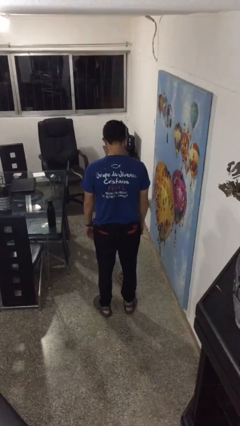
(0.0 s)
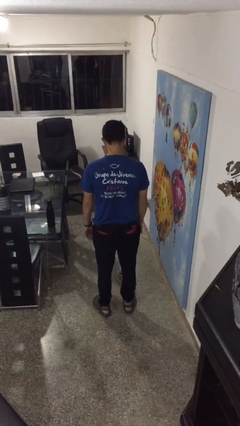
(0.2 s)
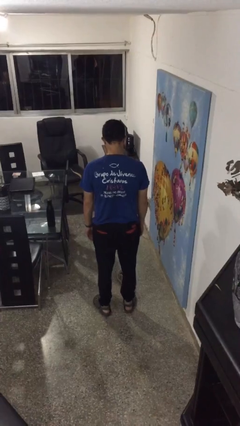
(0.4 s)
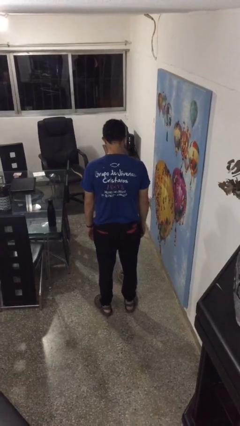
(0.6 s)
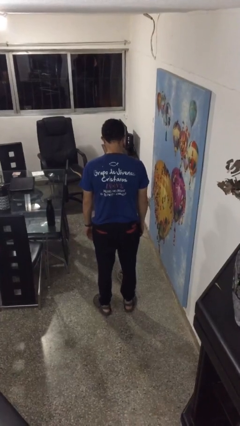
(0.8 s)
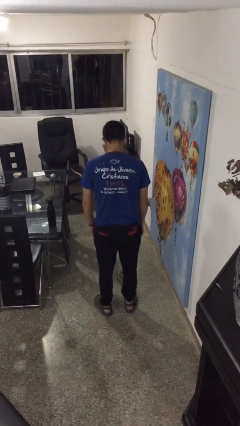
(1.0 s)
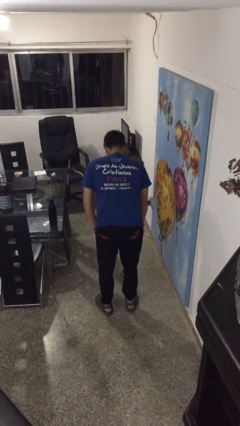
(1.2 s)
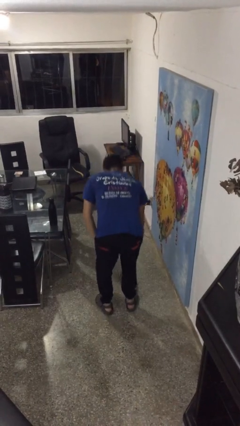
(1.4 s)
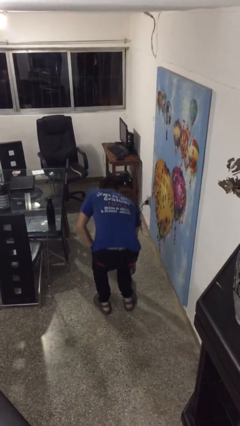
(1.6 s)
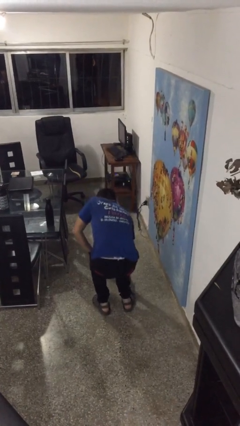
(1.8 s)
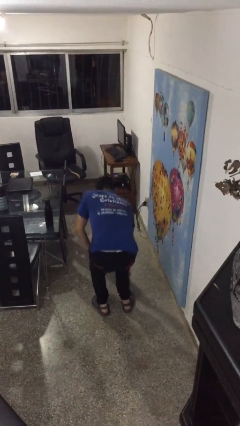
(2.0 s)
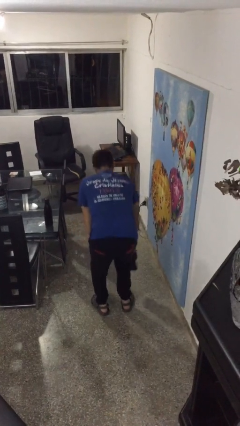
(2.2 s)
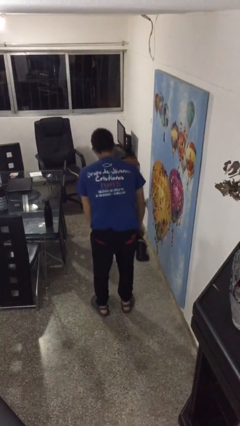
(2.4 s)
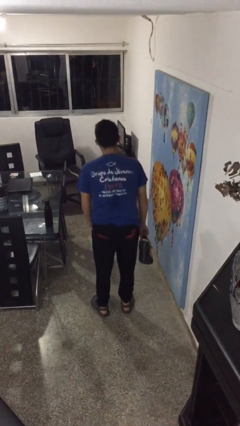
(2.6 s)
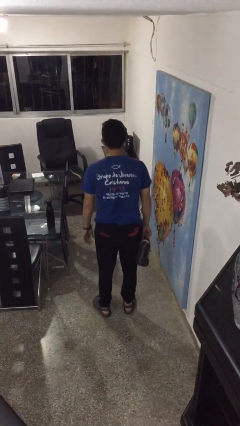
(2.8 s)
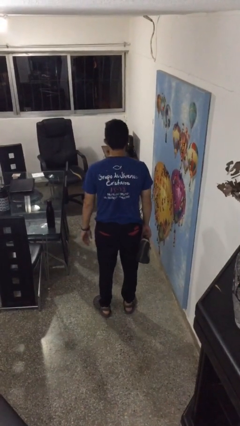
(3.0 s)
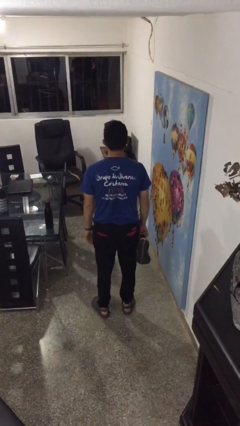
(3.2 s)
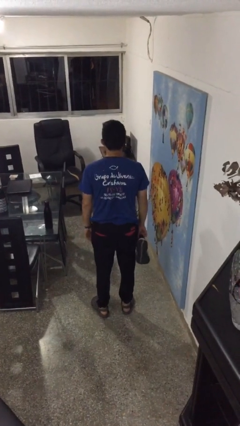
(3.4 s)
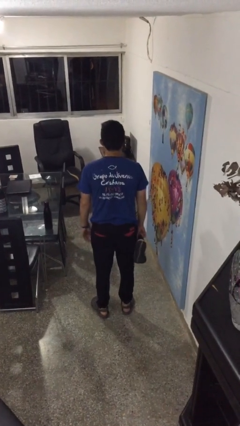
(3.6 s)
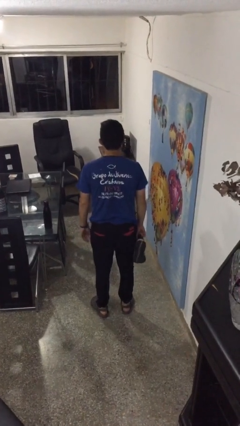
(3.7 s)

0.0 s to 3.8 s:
person picks up object from floor

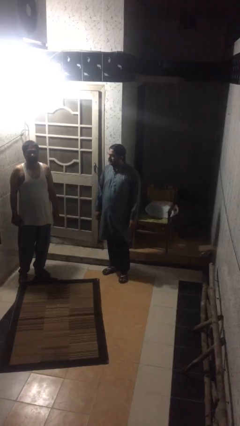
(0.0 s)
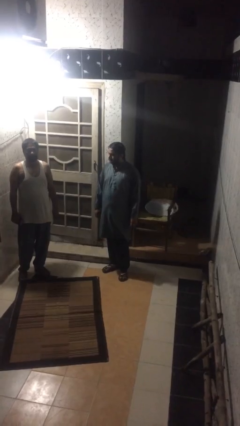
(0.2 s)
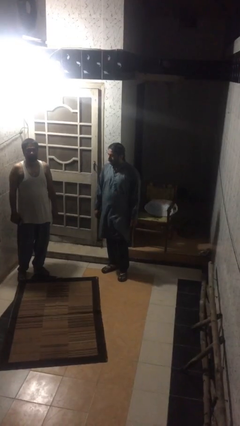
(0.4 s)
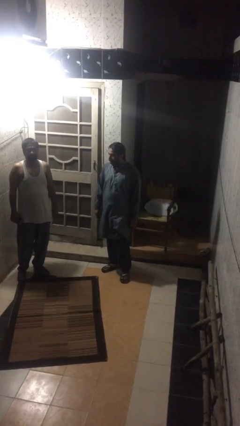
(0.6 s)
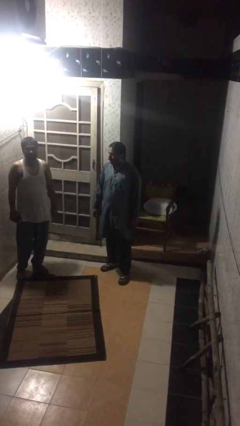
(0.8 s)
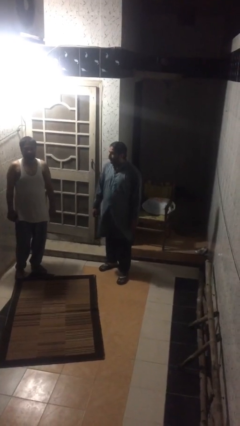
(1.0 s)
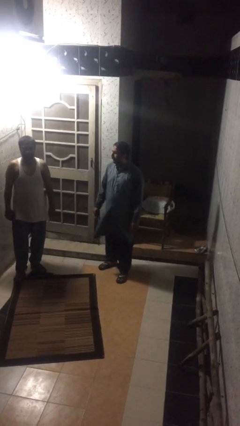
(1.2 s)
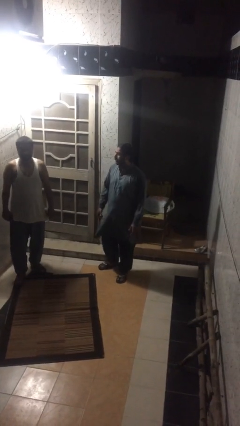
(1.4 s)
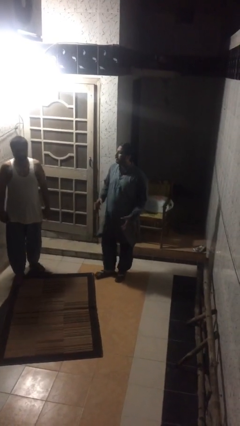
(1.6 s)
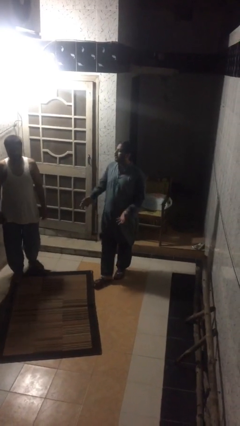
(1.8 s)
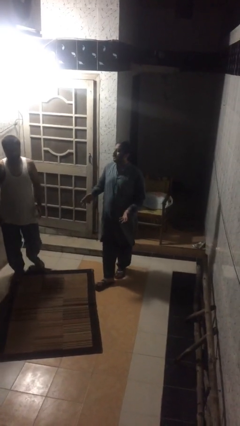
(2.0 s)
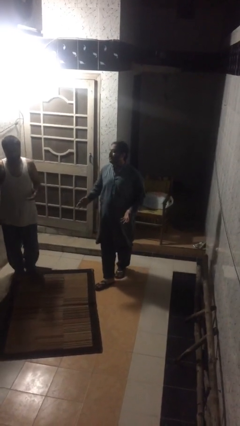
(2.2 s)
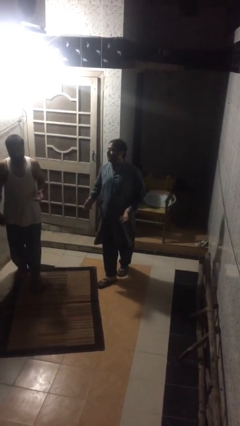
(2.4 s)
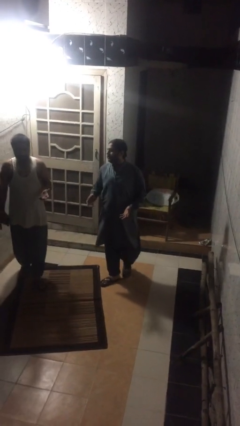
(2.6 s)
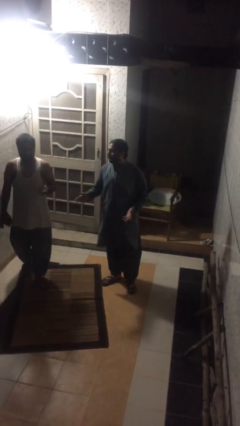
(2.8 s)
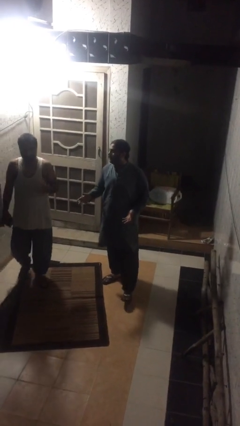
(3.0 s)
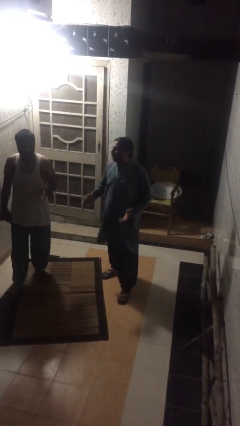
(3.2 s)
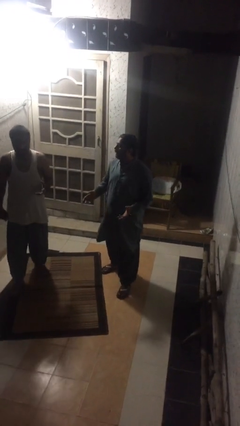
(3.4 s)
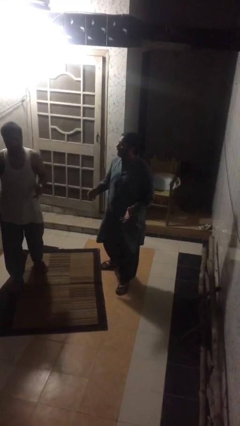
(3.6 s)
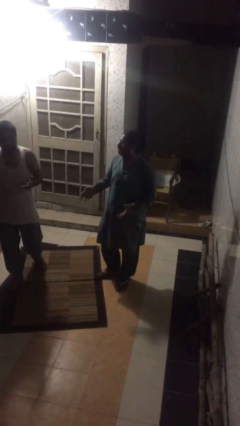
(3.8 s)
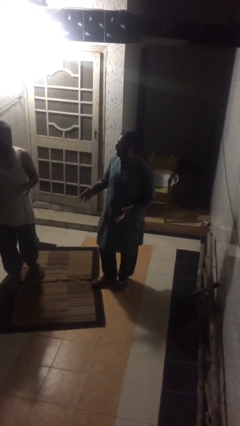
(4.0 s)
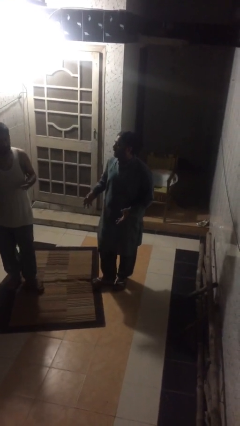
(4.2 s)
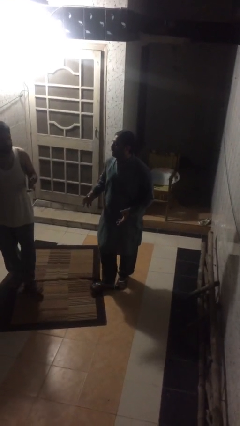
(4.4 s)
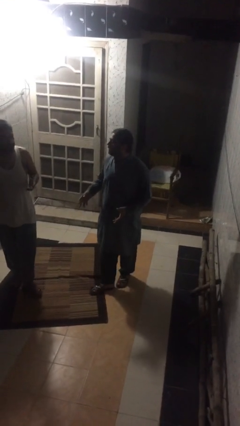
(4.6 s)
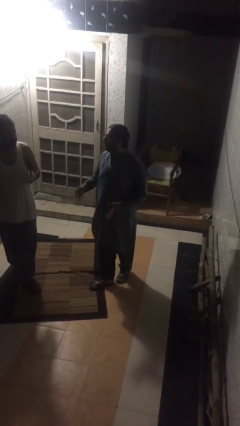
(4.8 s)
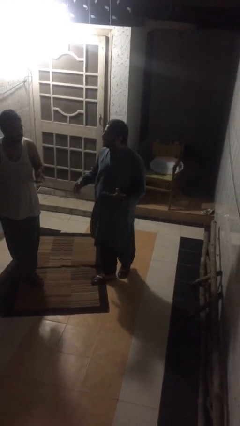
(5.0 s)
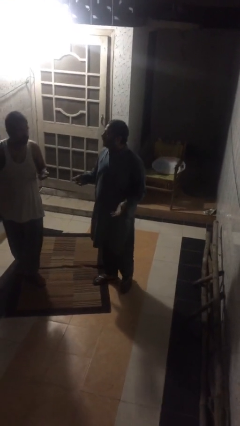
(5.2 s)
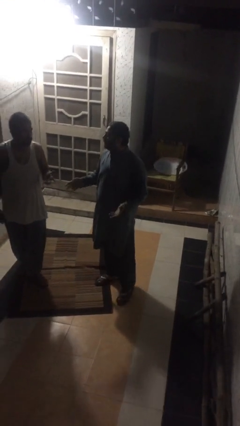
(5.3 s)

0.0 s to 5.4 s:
person talks to person

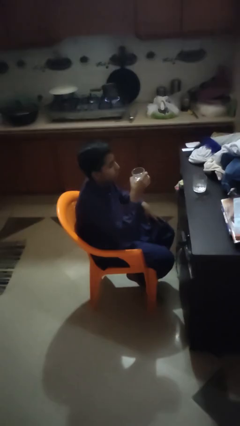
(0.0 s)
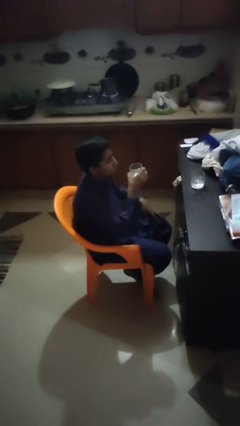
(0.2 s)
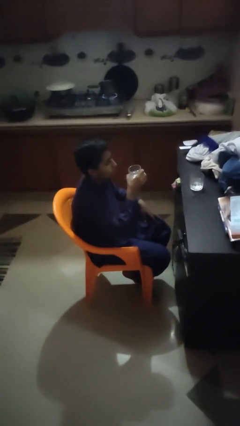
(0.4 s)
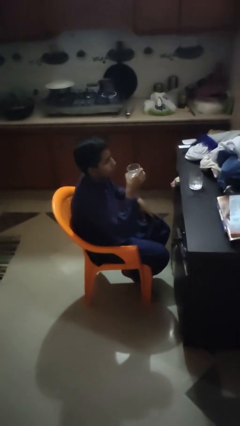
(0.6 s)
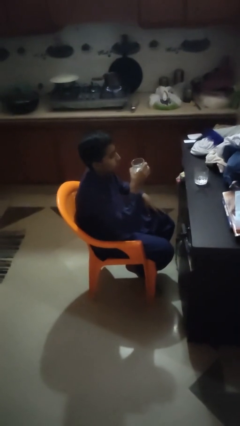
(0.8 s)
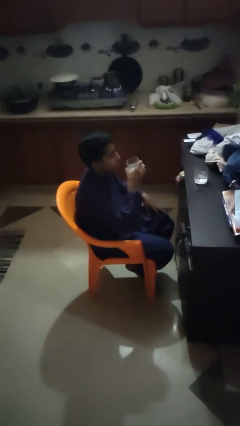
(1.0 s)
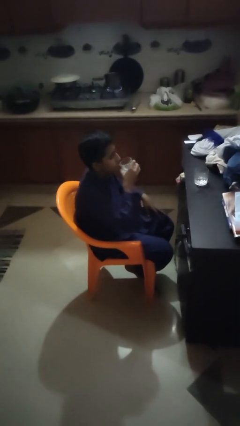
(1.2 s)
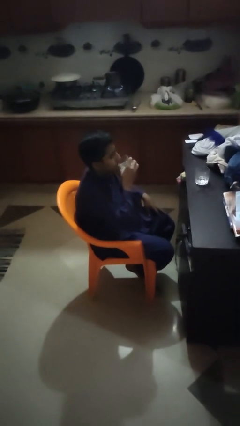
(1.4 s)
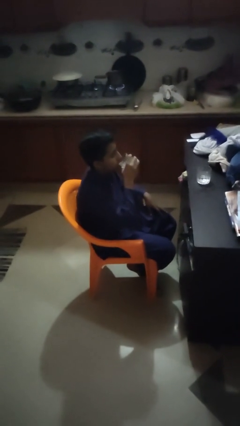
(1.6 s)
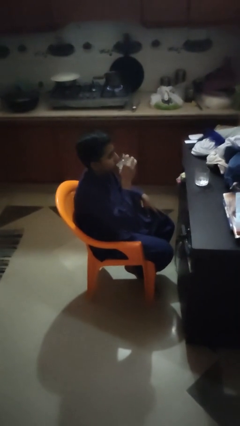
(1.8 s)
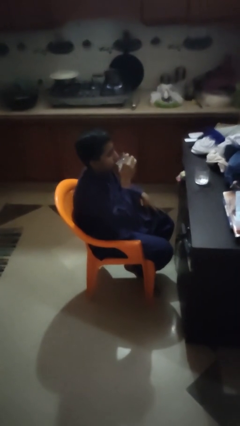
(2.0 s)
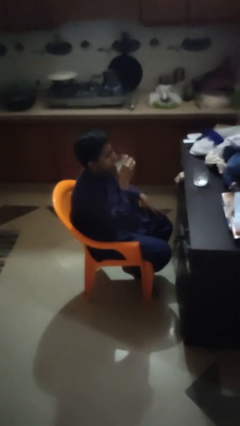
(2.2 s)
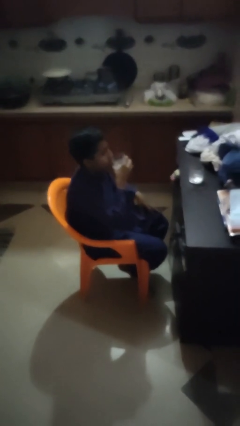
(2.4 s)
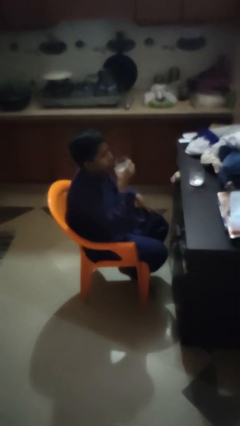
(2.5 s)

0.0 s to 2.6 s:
person drinks from shotglass

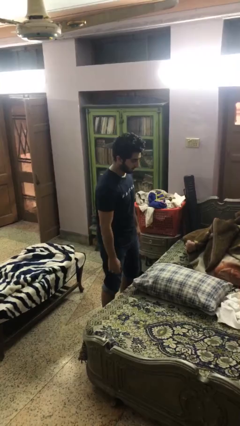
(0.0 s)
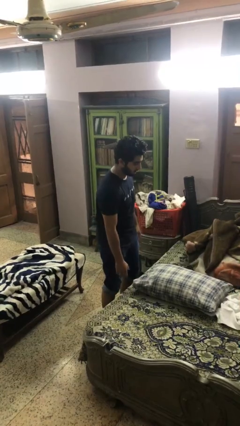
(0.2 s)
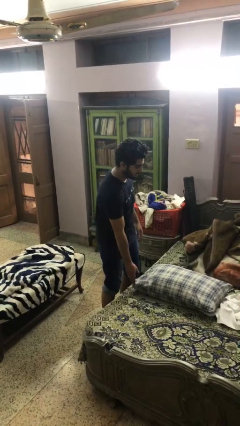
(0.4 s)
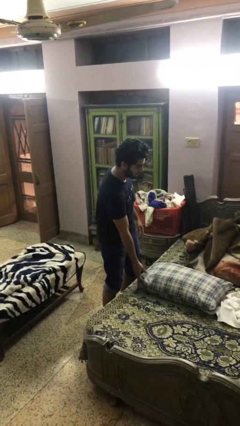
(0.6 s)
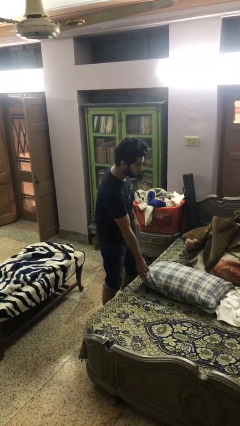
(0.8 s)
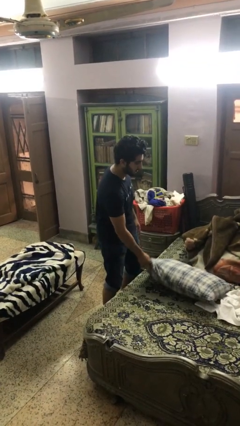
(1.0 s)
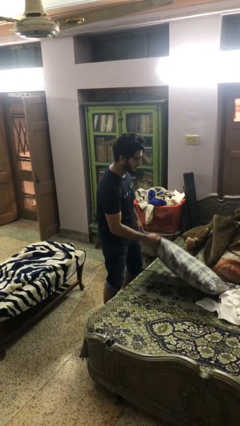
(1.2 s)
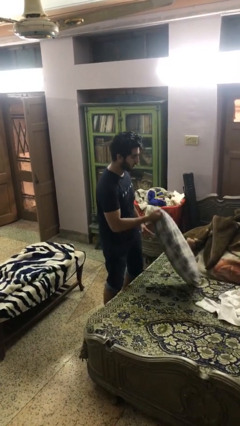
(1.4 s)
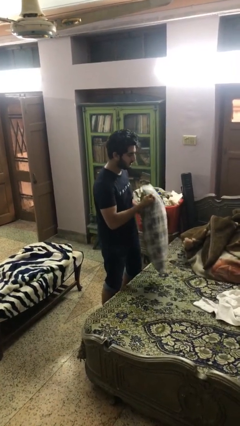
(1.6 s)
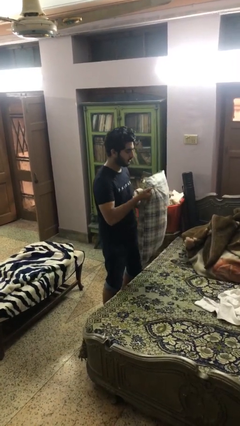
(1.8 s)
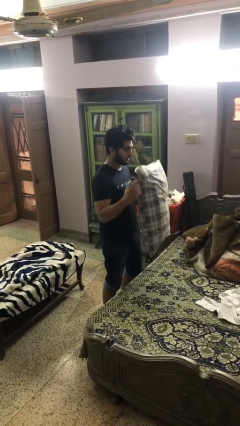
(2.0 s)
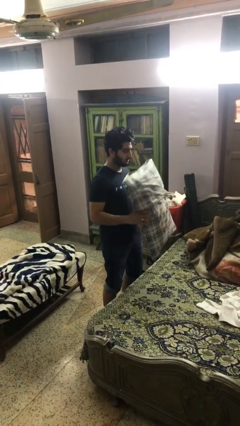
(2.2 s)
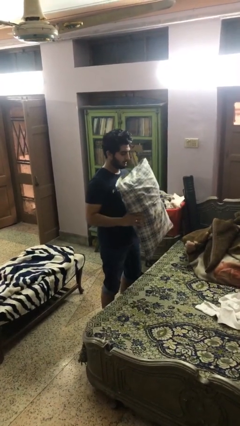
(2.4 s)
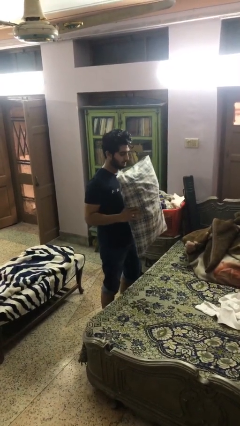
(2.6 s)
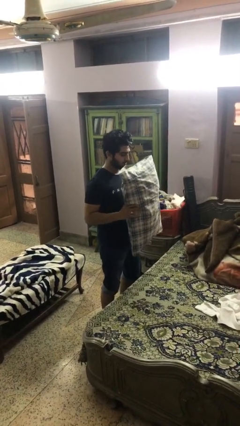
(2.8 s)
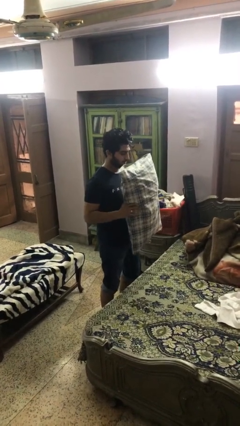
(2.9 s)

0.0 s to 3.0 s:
person picks up object from bed

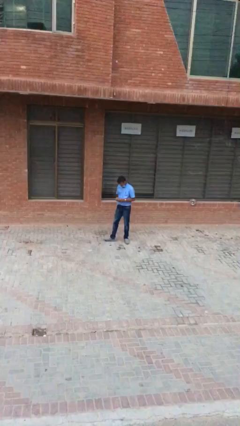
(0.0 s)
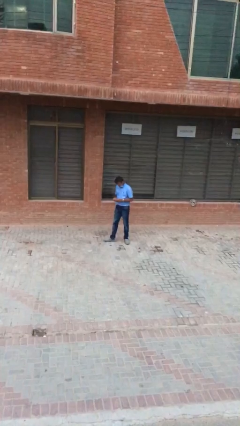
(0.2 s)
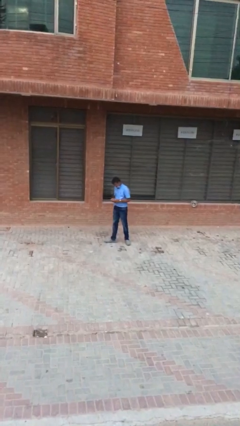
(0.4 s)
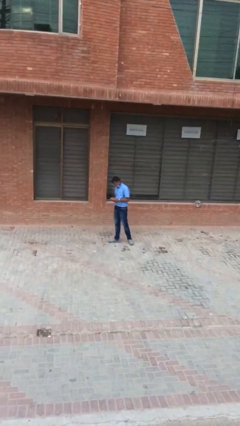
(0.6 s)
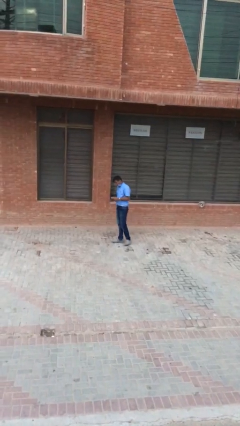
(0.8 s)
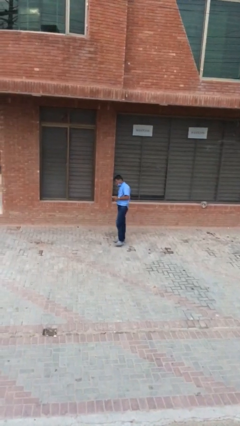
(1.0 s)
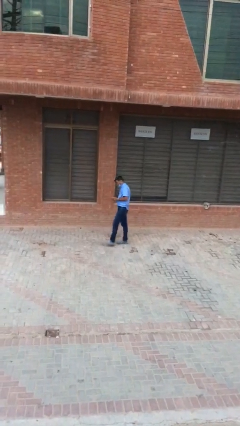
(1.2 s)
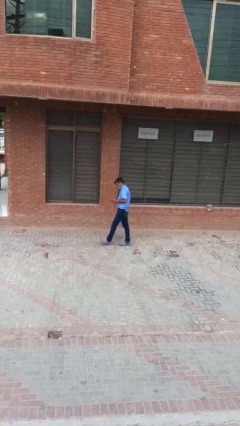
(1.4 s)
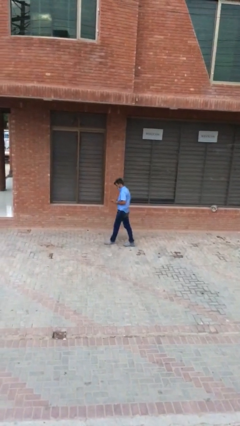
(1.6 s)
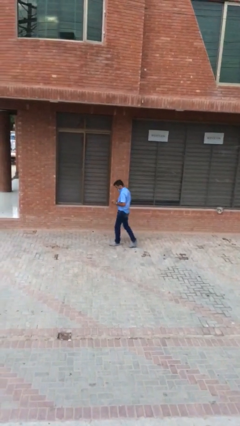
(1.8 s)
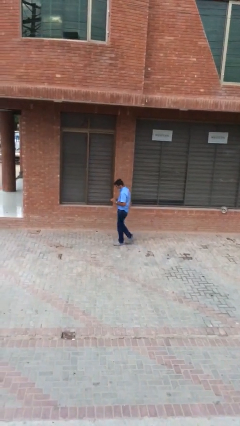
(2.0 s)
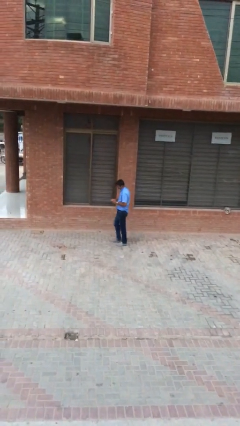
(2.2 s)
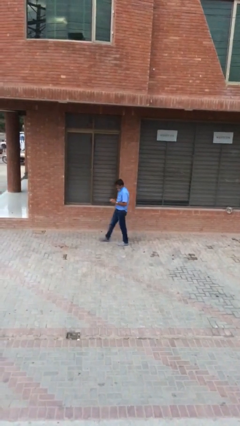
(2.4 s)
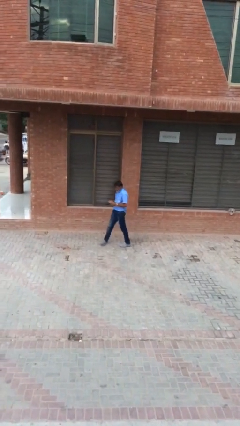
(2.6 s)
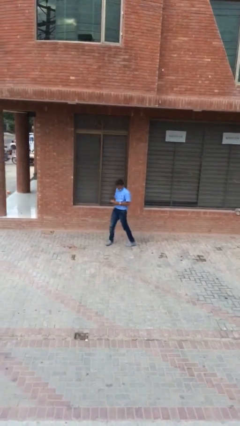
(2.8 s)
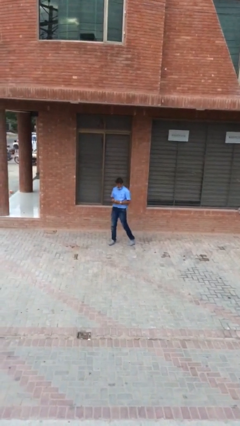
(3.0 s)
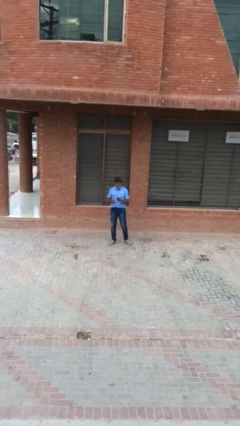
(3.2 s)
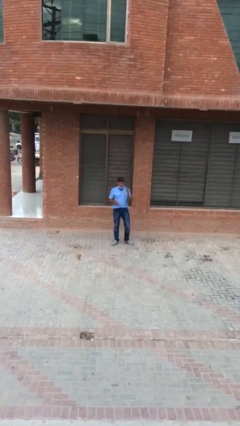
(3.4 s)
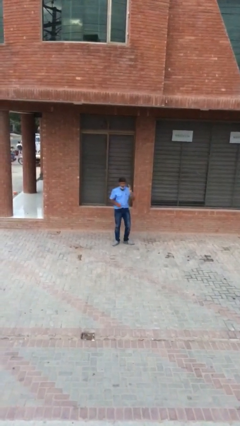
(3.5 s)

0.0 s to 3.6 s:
person texts on phone
